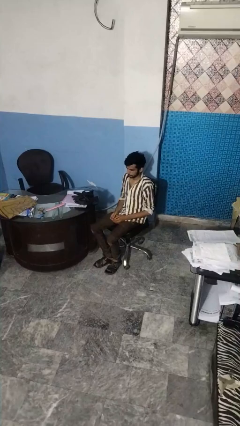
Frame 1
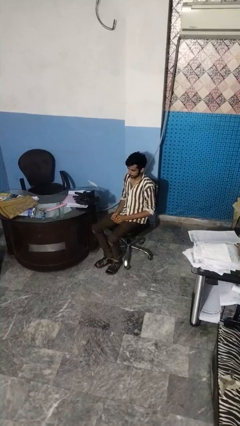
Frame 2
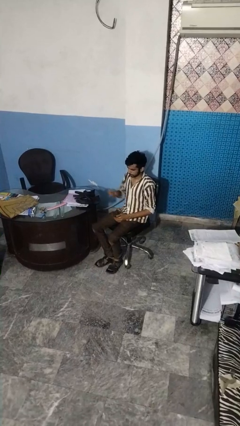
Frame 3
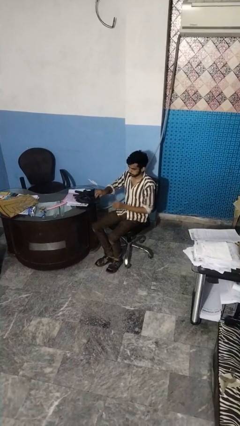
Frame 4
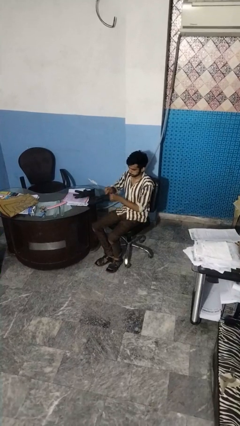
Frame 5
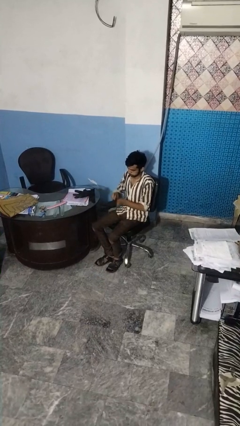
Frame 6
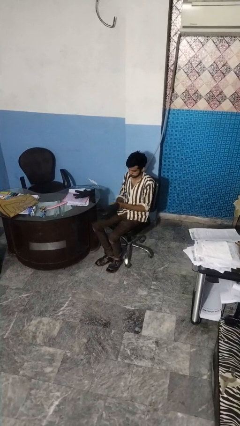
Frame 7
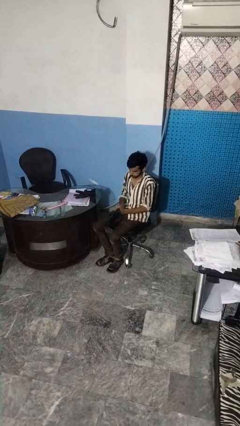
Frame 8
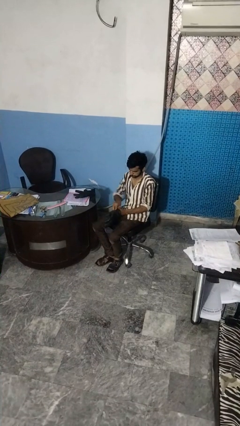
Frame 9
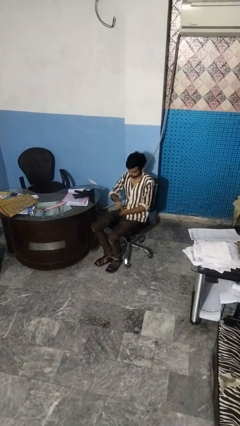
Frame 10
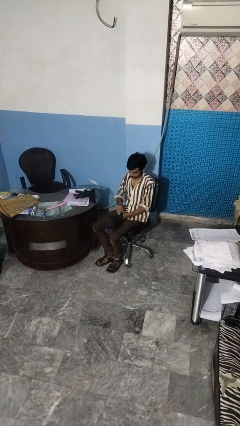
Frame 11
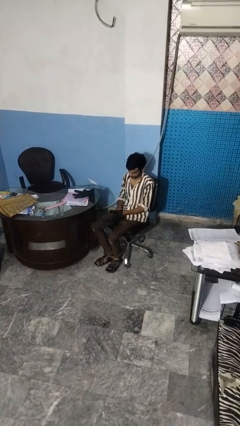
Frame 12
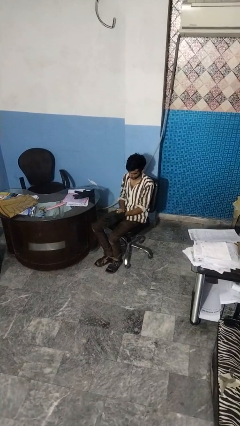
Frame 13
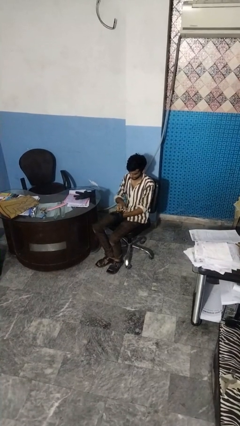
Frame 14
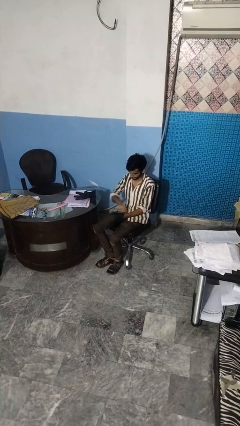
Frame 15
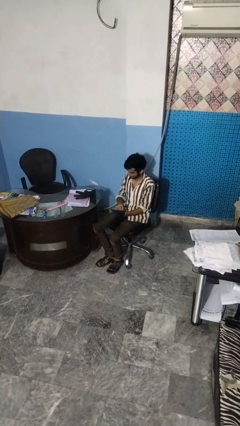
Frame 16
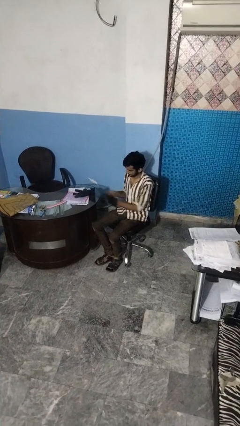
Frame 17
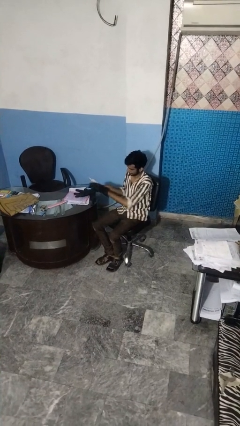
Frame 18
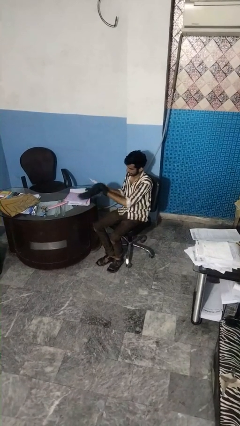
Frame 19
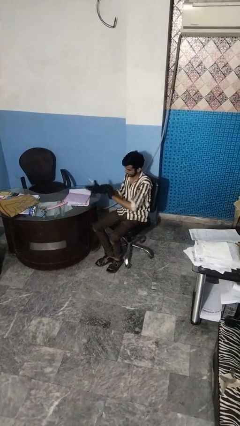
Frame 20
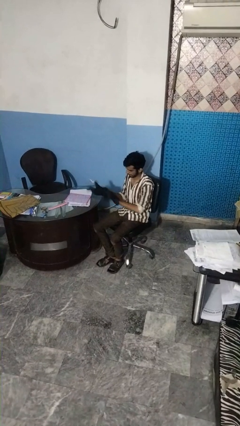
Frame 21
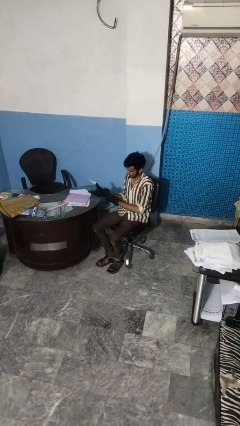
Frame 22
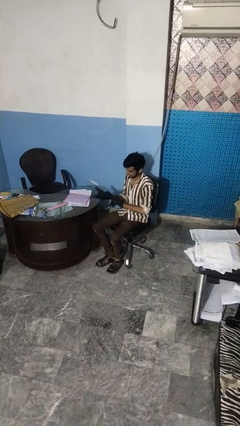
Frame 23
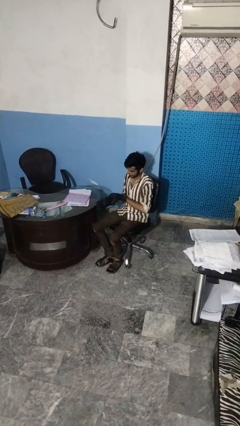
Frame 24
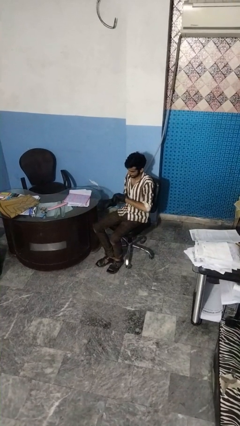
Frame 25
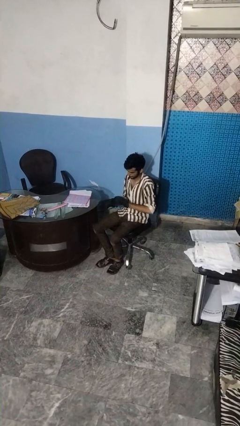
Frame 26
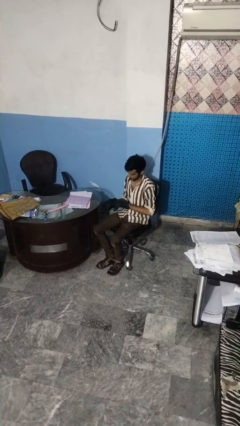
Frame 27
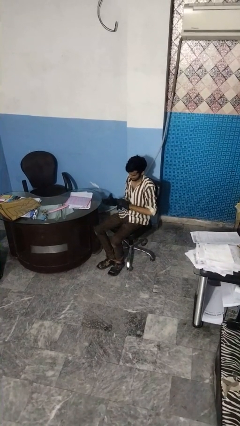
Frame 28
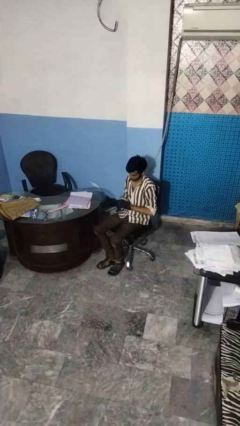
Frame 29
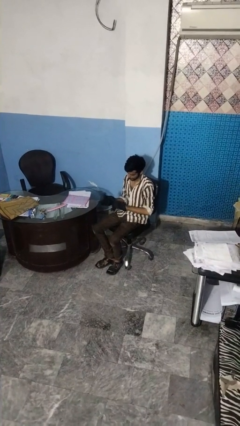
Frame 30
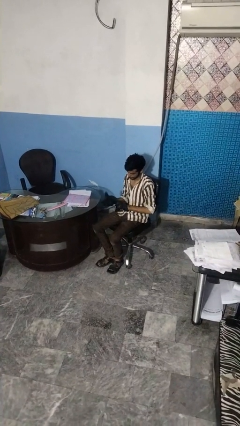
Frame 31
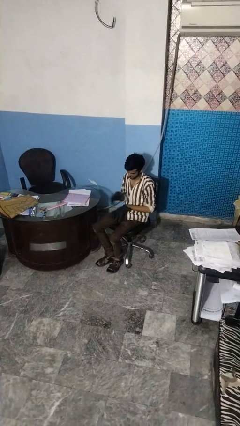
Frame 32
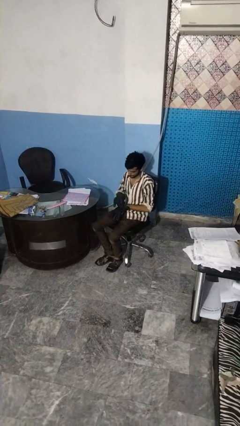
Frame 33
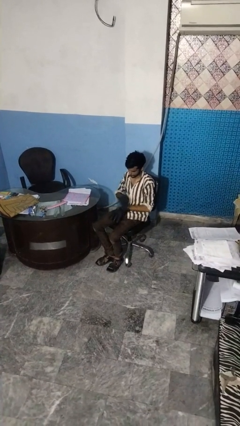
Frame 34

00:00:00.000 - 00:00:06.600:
person puts on gloves

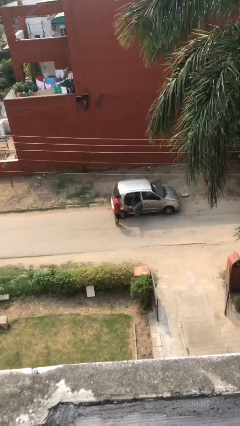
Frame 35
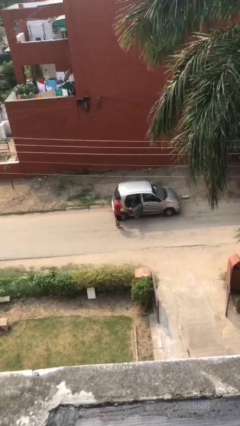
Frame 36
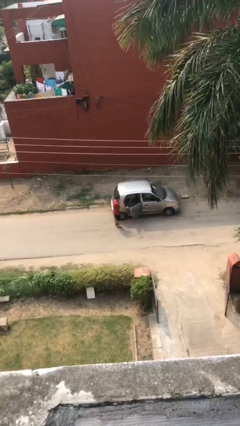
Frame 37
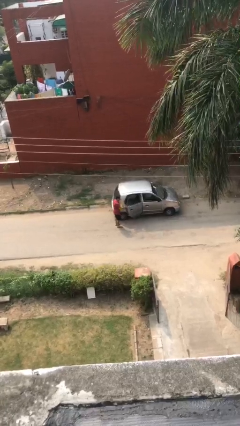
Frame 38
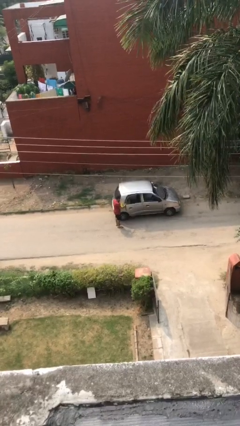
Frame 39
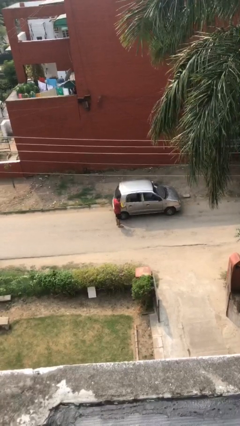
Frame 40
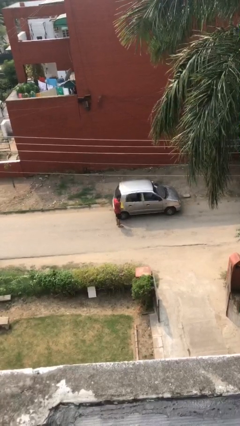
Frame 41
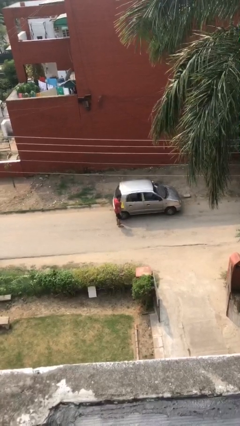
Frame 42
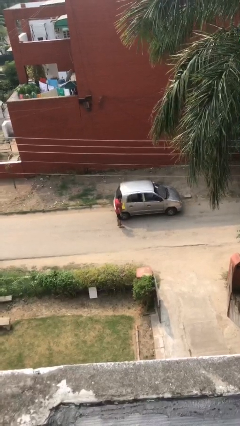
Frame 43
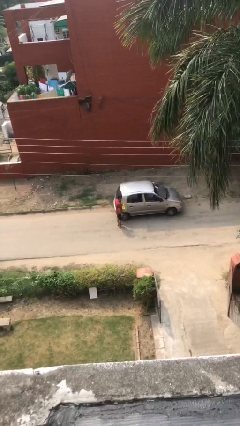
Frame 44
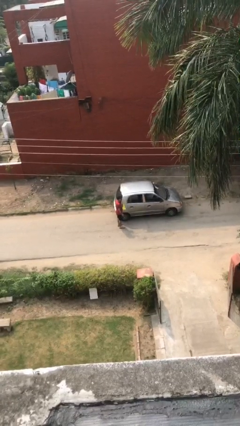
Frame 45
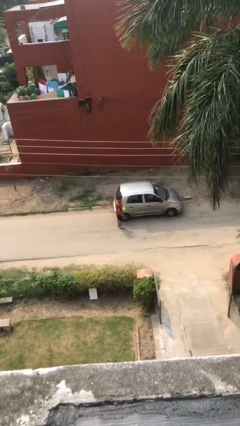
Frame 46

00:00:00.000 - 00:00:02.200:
person closes car door

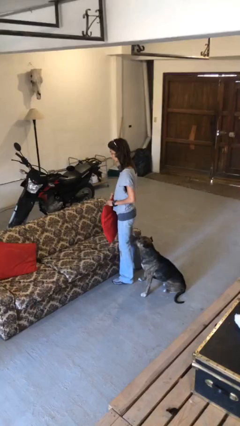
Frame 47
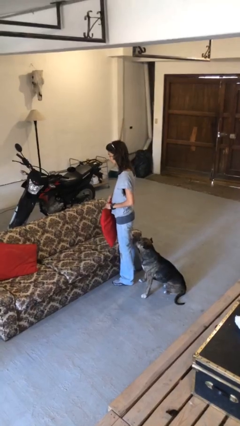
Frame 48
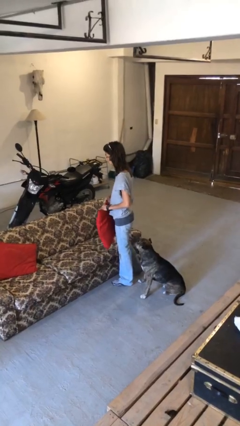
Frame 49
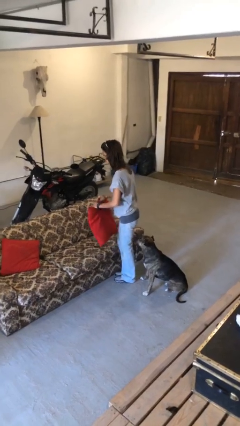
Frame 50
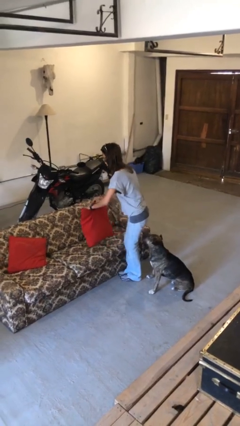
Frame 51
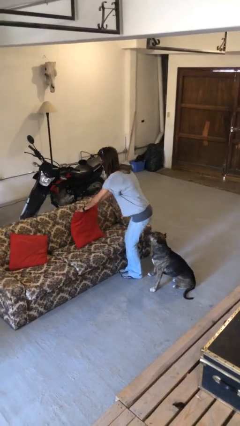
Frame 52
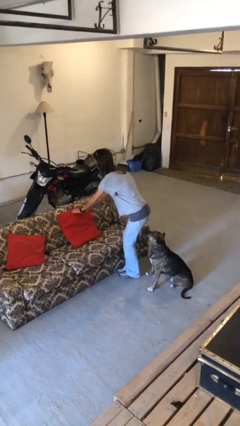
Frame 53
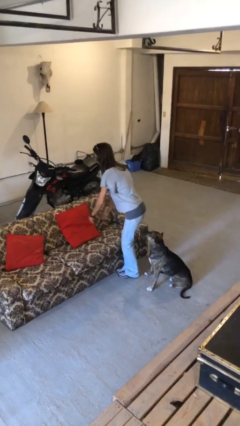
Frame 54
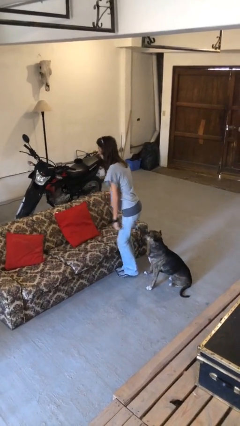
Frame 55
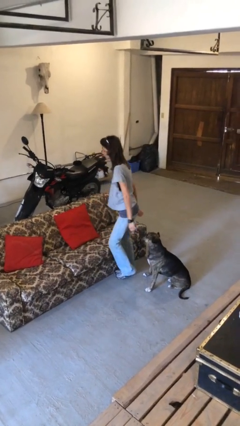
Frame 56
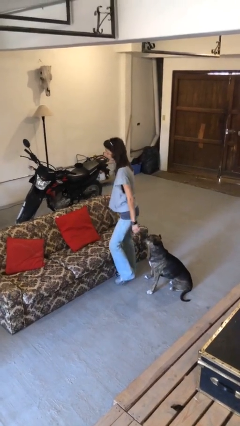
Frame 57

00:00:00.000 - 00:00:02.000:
person puts down object on couch

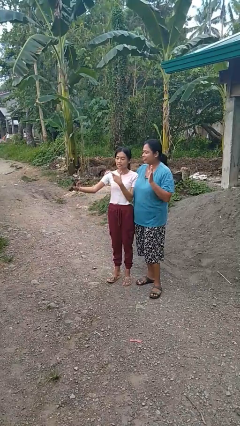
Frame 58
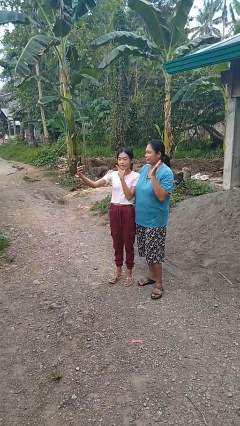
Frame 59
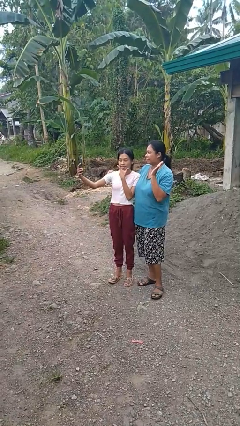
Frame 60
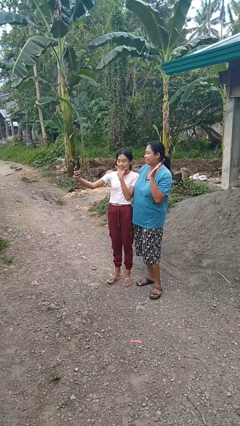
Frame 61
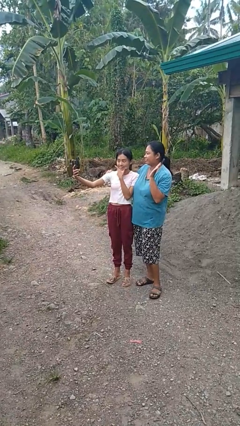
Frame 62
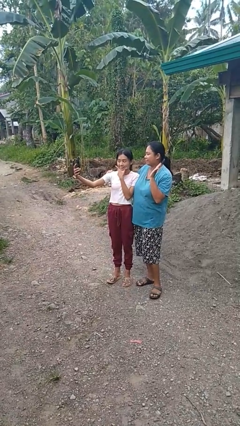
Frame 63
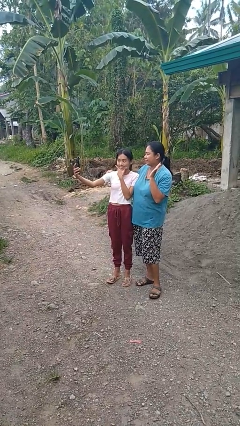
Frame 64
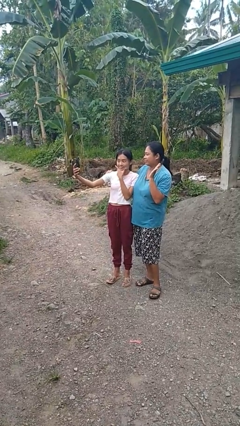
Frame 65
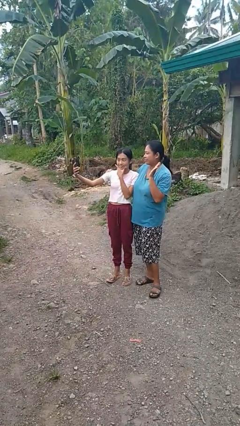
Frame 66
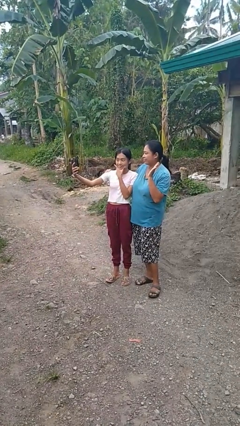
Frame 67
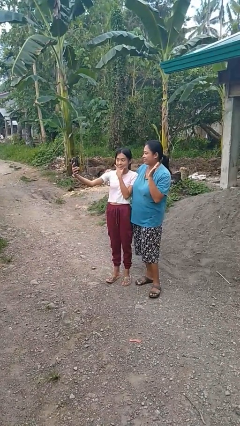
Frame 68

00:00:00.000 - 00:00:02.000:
person takes selfie with person

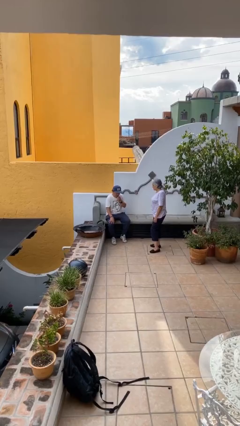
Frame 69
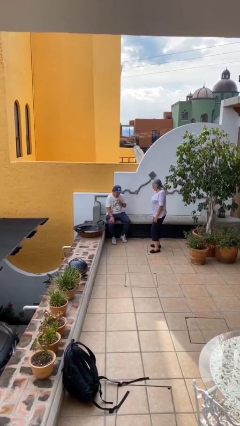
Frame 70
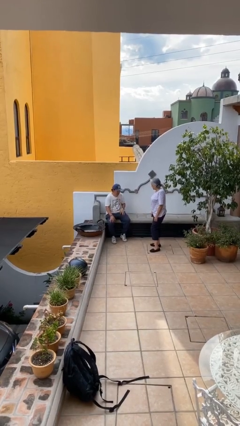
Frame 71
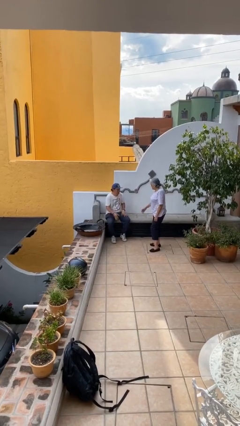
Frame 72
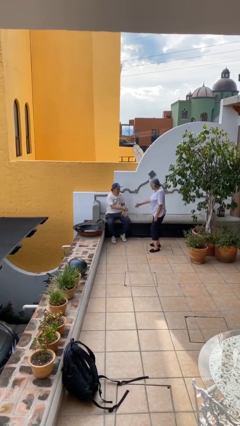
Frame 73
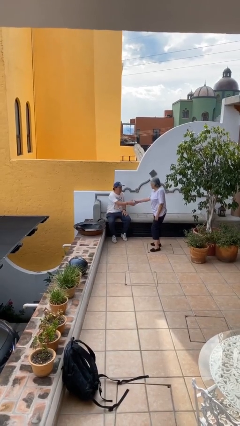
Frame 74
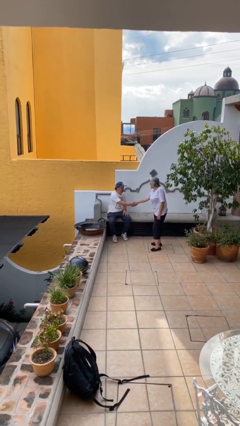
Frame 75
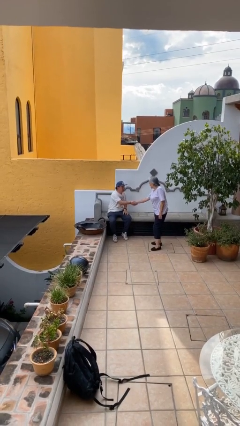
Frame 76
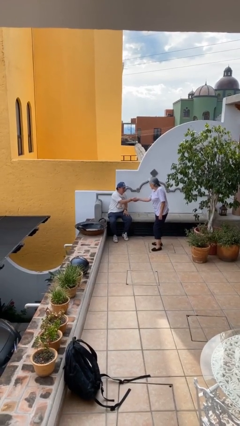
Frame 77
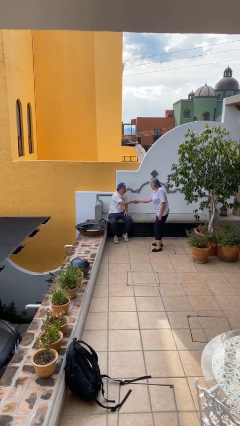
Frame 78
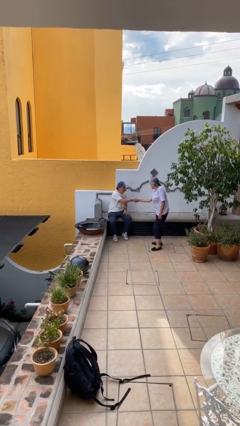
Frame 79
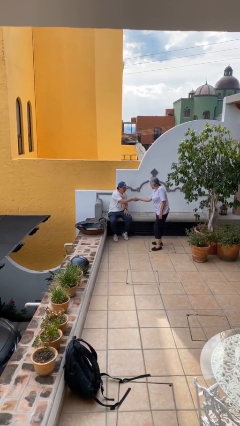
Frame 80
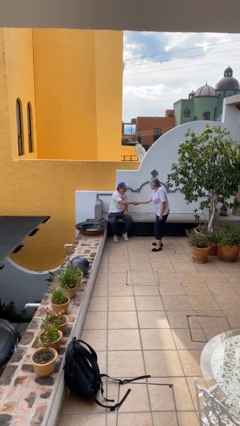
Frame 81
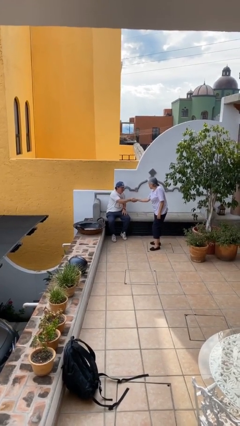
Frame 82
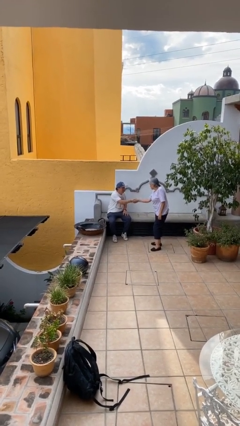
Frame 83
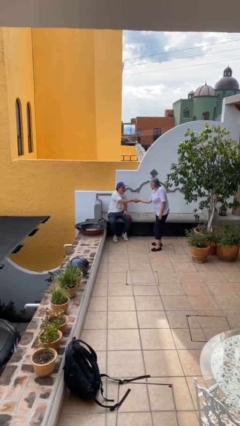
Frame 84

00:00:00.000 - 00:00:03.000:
person shakes hand

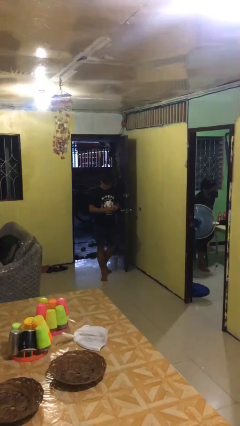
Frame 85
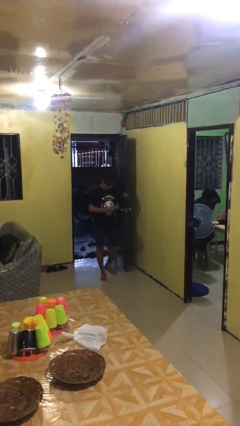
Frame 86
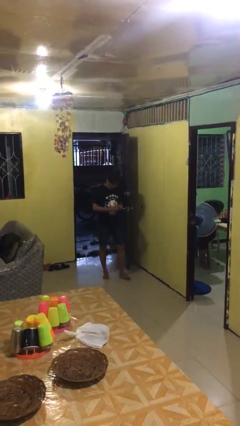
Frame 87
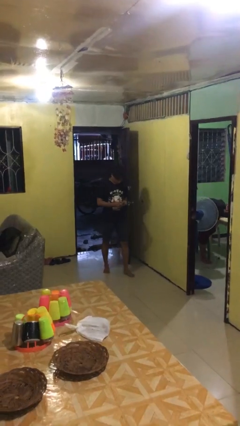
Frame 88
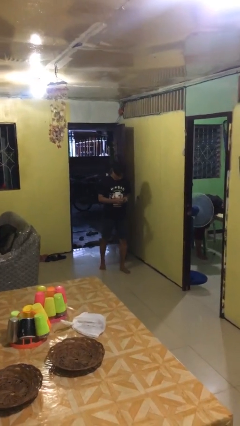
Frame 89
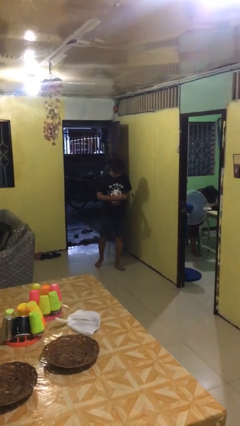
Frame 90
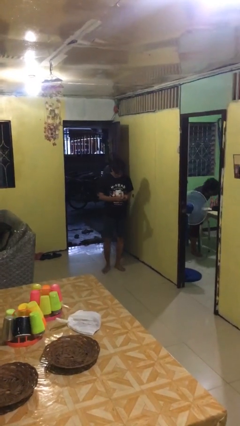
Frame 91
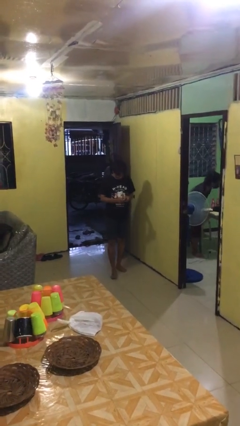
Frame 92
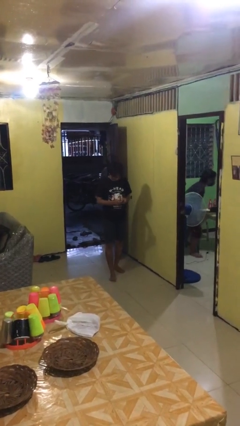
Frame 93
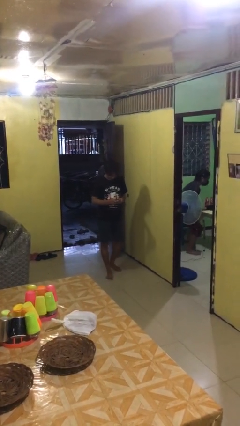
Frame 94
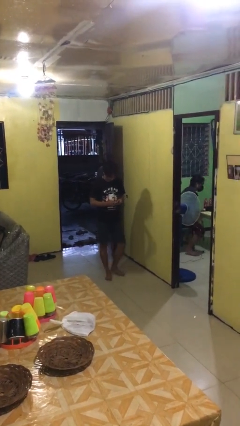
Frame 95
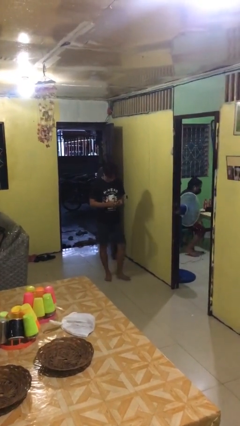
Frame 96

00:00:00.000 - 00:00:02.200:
person texts on phone
